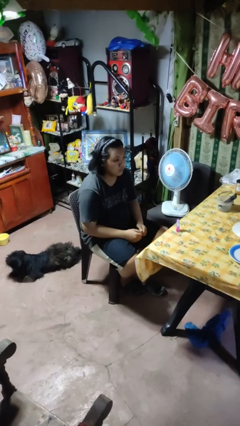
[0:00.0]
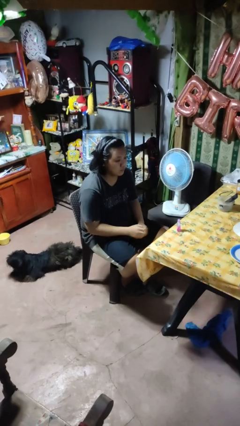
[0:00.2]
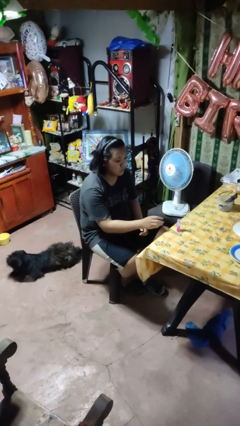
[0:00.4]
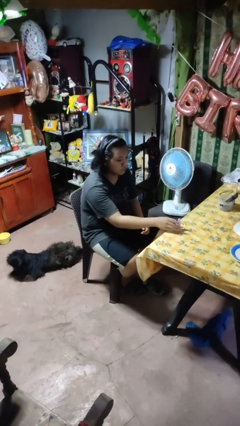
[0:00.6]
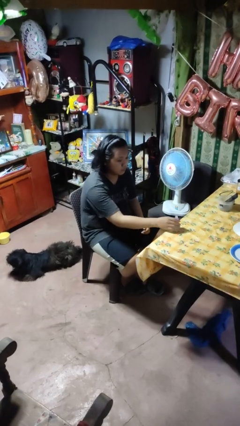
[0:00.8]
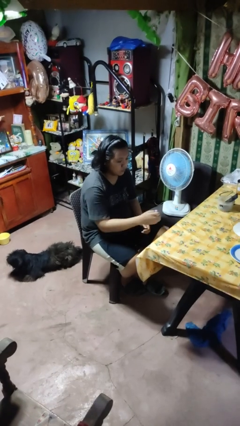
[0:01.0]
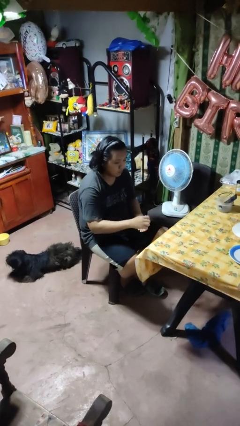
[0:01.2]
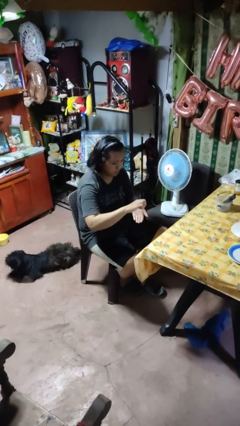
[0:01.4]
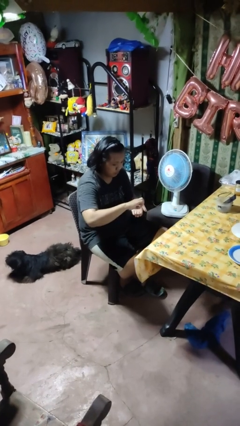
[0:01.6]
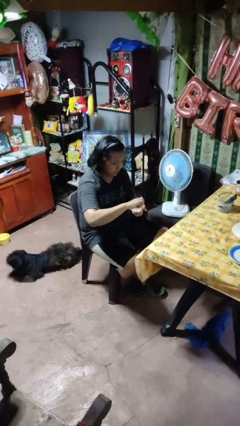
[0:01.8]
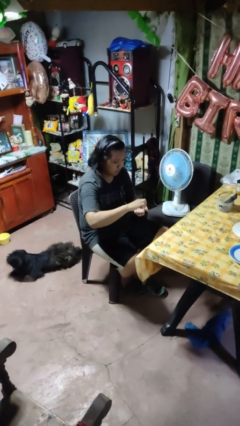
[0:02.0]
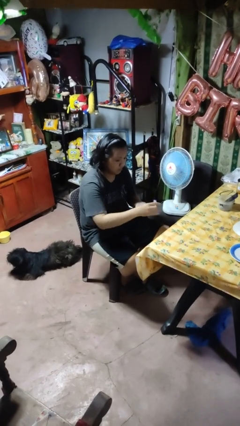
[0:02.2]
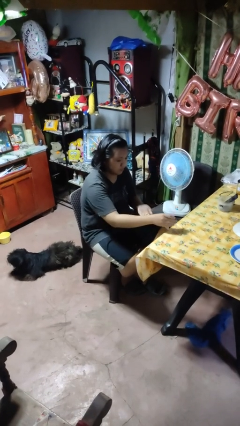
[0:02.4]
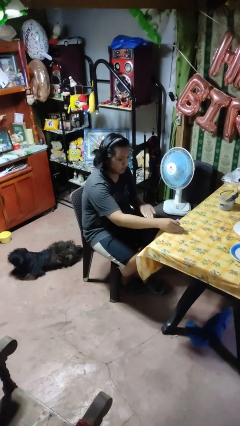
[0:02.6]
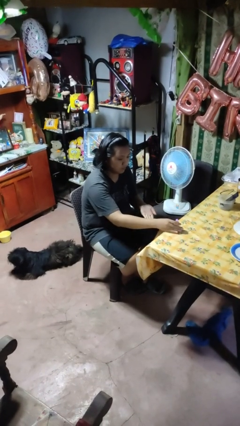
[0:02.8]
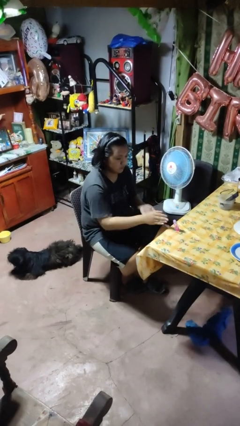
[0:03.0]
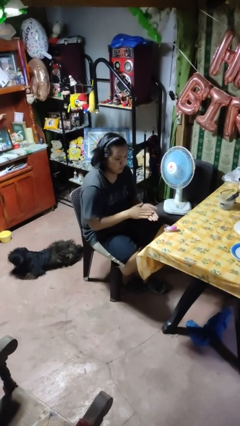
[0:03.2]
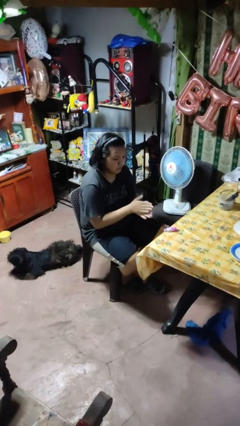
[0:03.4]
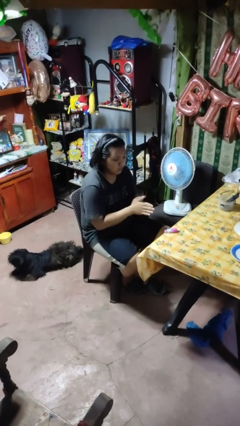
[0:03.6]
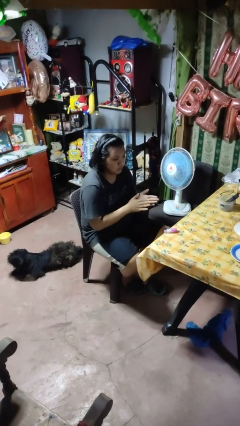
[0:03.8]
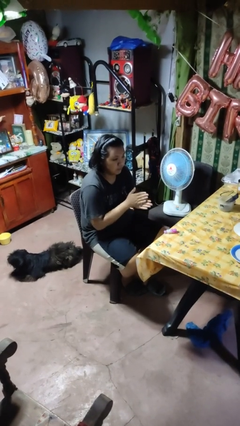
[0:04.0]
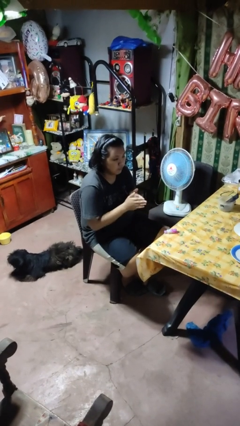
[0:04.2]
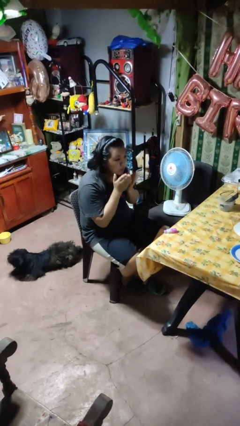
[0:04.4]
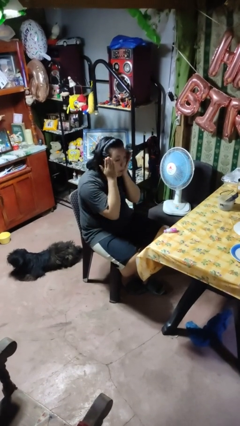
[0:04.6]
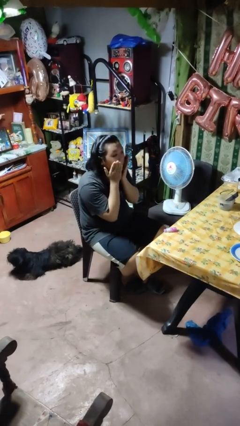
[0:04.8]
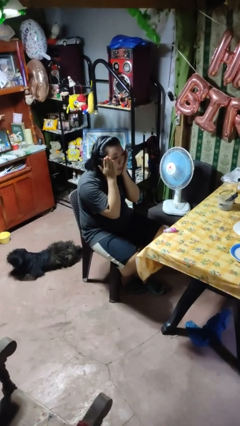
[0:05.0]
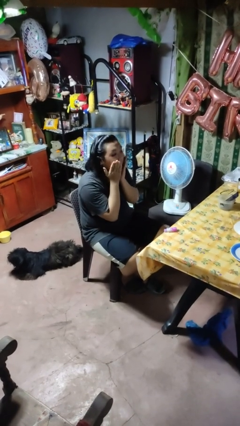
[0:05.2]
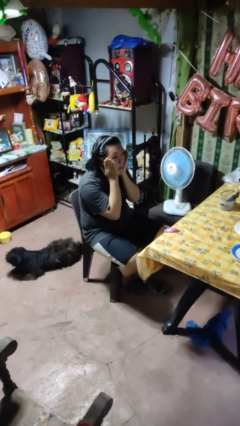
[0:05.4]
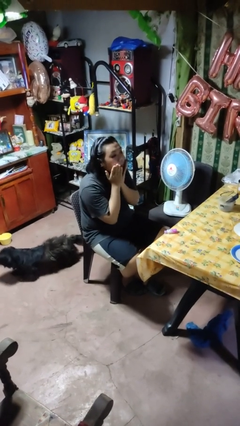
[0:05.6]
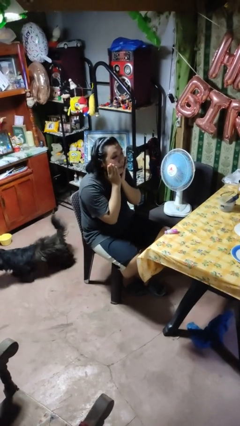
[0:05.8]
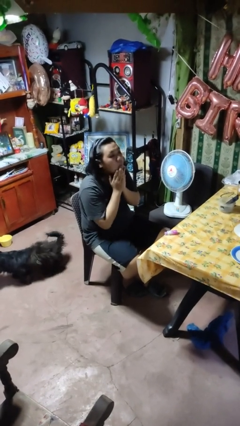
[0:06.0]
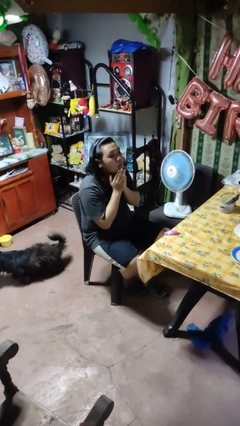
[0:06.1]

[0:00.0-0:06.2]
person applies facial moisturizer

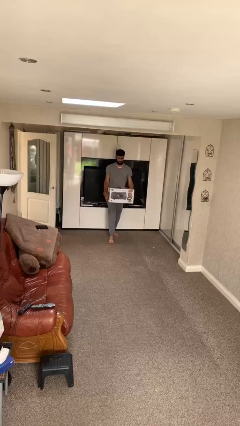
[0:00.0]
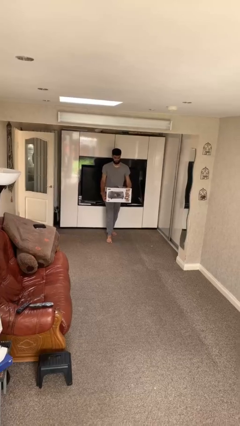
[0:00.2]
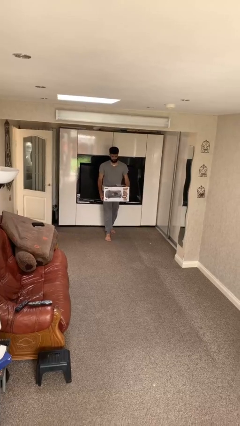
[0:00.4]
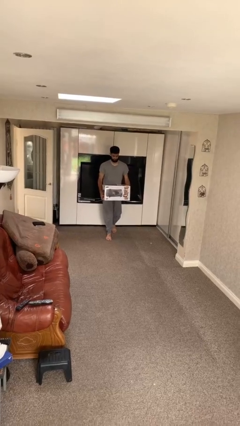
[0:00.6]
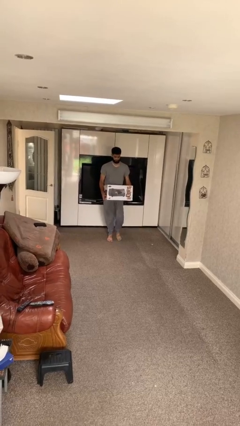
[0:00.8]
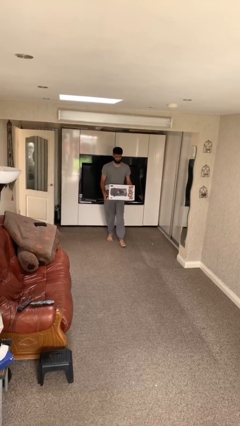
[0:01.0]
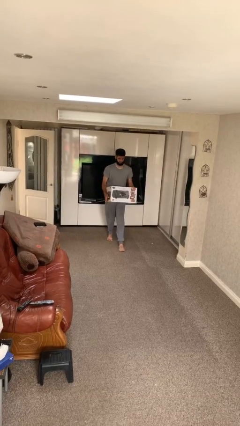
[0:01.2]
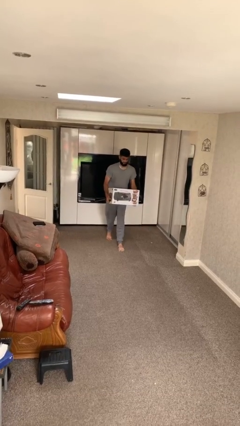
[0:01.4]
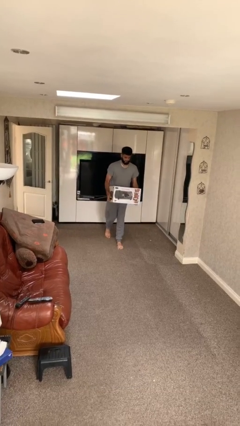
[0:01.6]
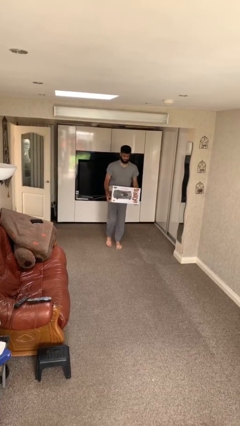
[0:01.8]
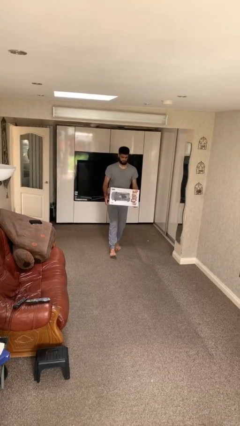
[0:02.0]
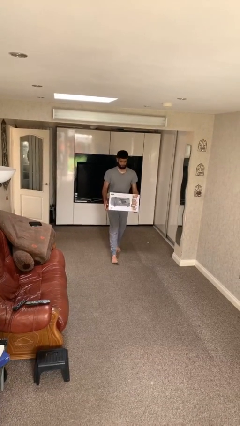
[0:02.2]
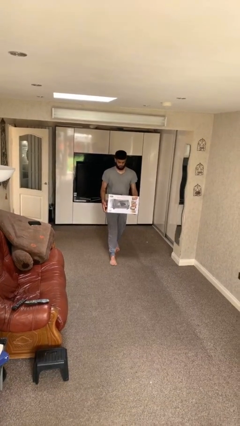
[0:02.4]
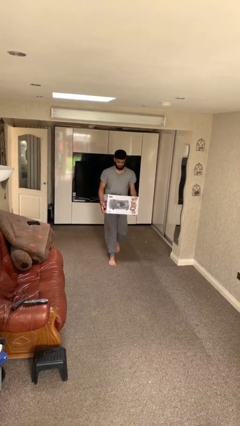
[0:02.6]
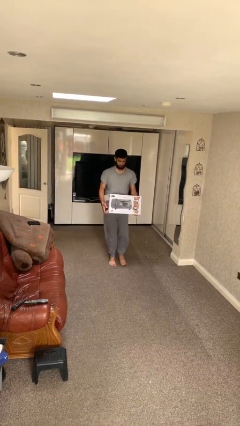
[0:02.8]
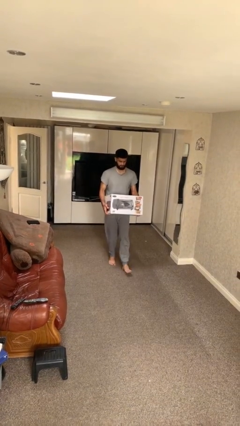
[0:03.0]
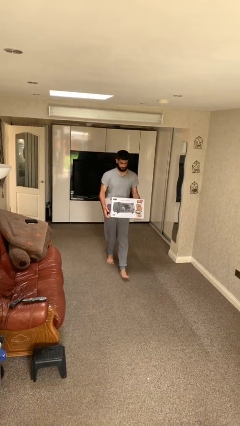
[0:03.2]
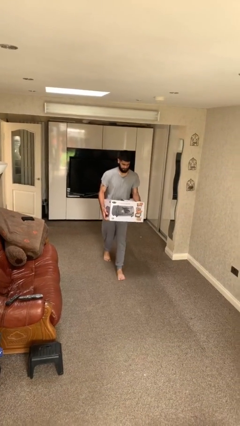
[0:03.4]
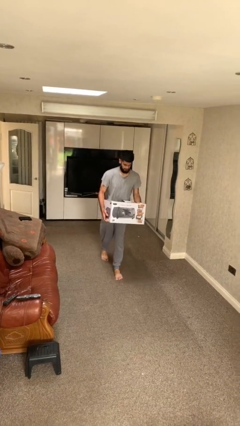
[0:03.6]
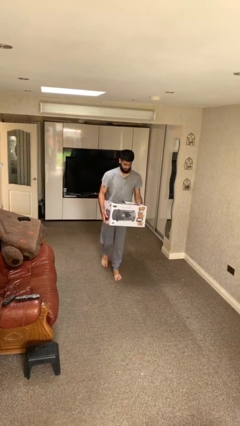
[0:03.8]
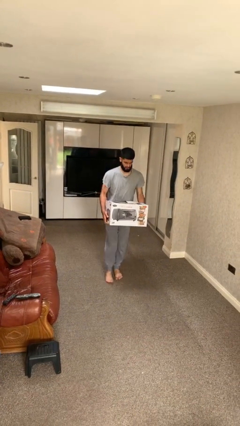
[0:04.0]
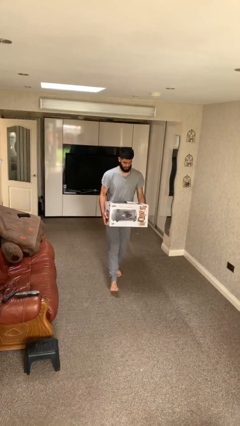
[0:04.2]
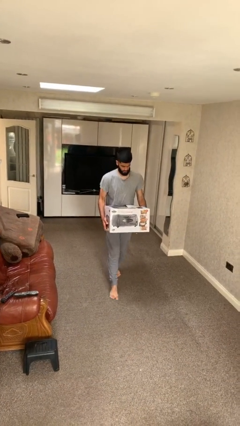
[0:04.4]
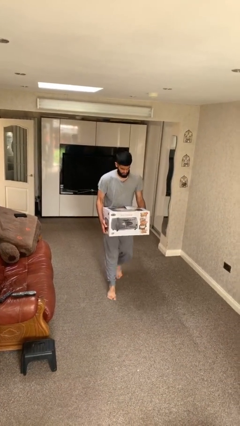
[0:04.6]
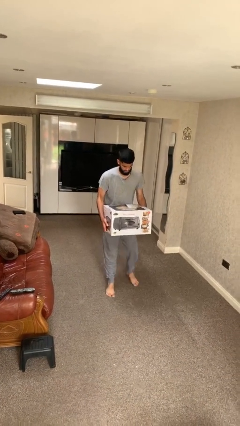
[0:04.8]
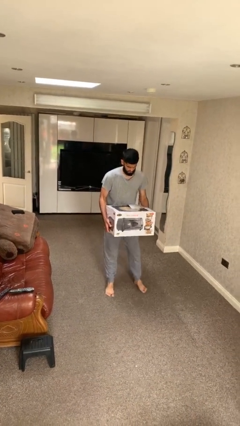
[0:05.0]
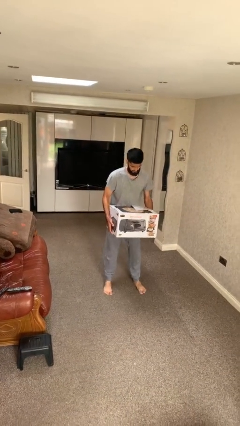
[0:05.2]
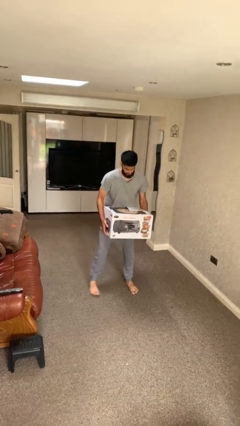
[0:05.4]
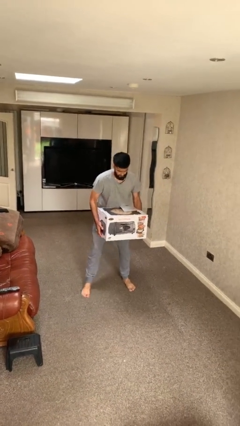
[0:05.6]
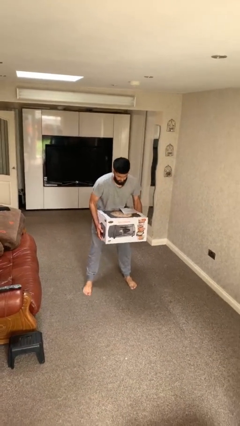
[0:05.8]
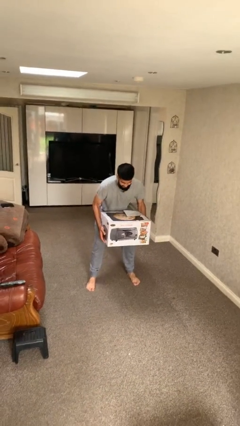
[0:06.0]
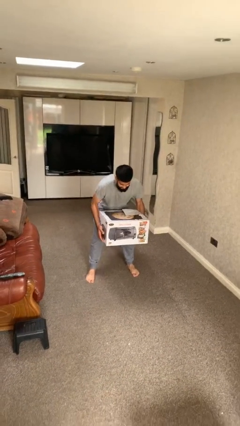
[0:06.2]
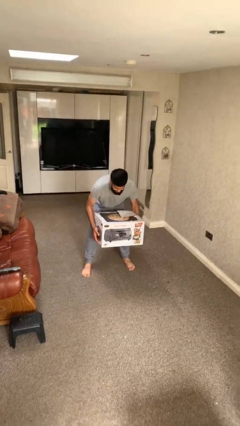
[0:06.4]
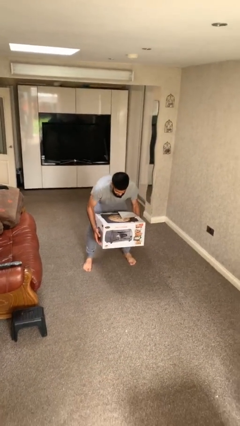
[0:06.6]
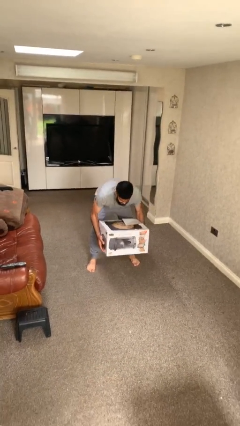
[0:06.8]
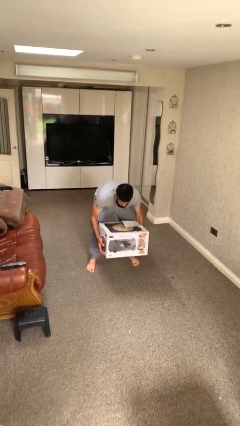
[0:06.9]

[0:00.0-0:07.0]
person carries heavy object

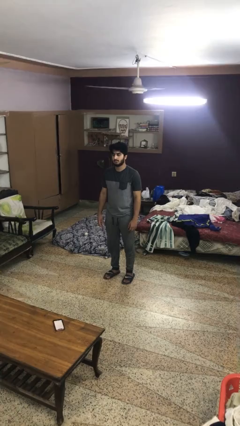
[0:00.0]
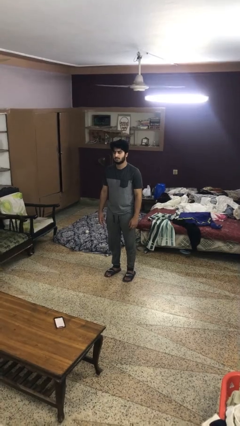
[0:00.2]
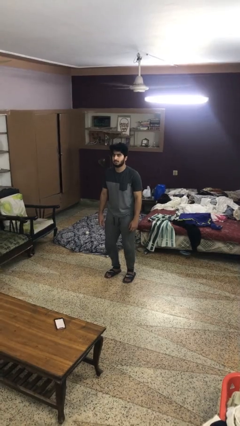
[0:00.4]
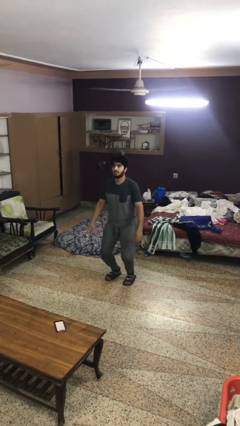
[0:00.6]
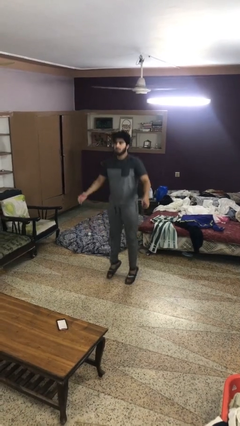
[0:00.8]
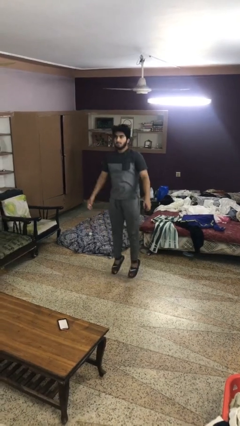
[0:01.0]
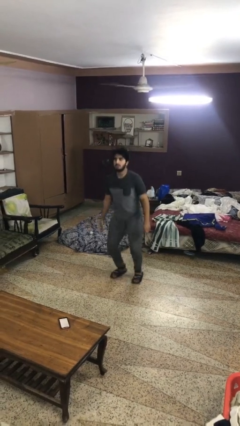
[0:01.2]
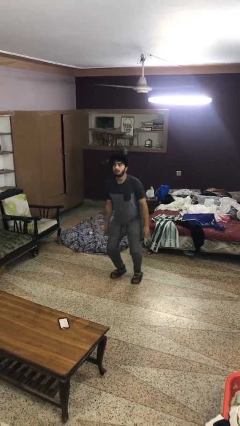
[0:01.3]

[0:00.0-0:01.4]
person jumps

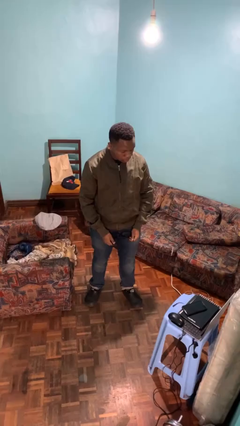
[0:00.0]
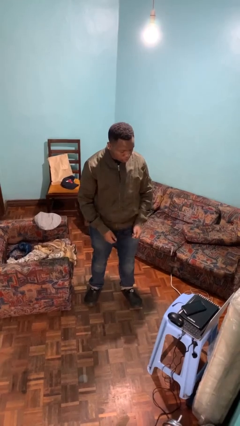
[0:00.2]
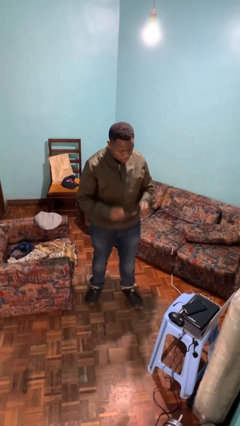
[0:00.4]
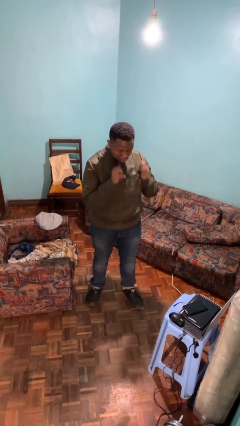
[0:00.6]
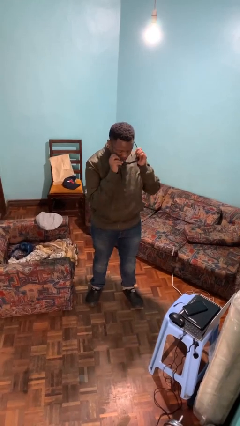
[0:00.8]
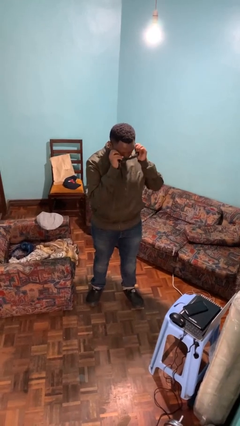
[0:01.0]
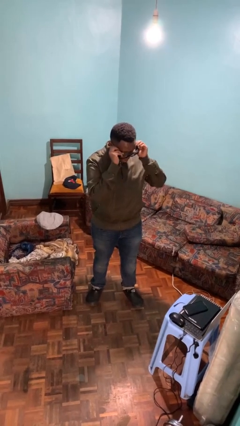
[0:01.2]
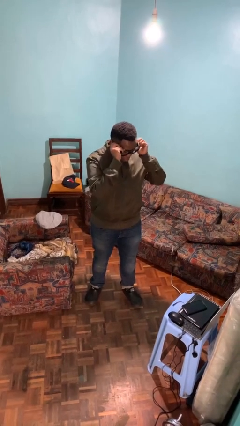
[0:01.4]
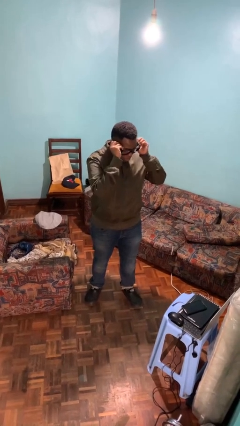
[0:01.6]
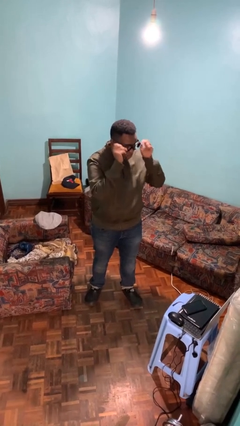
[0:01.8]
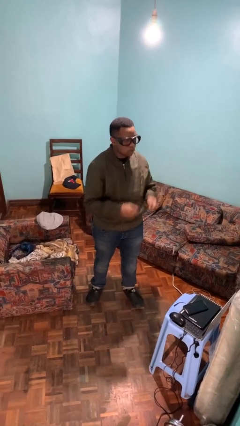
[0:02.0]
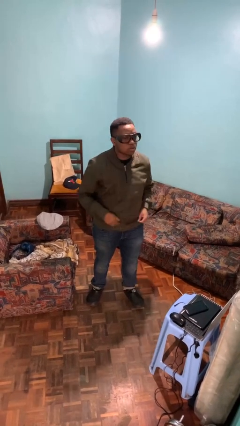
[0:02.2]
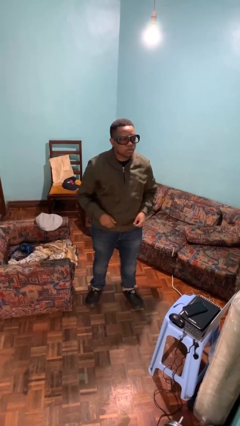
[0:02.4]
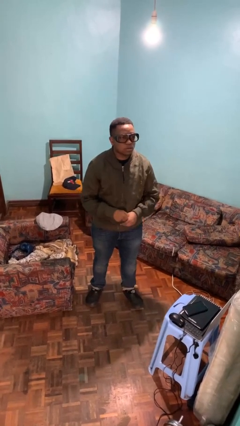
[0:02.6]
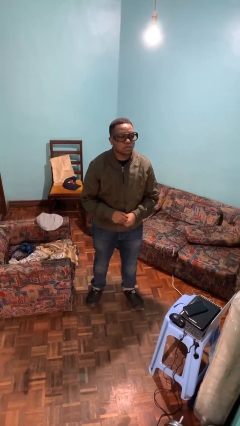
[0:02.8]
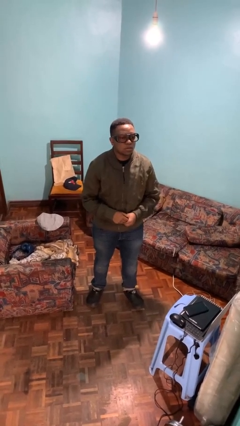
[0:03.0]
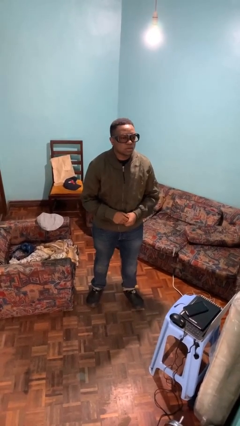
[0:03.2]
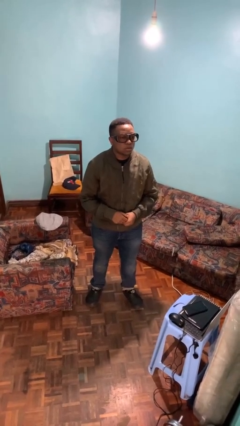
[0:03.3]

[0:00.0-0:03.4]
person puts on glasses
